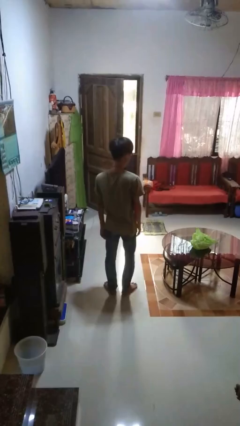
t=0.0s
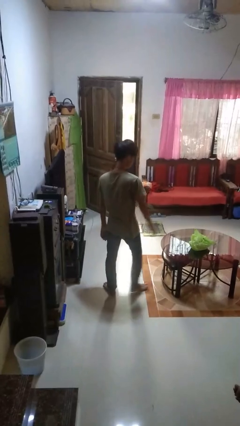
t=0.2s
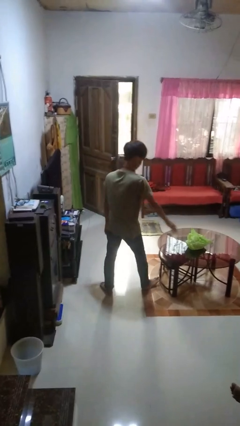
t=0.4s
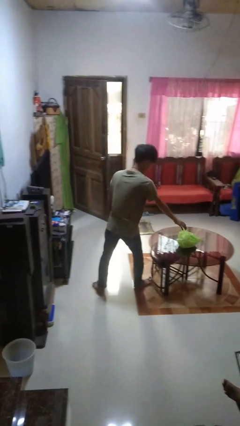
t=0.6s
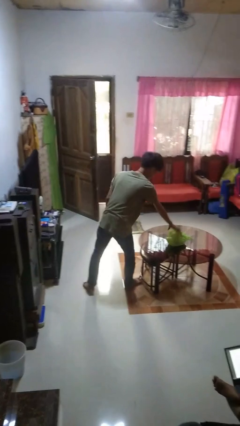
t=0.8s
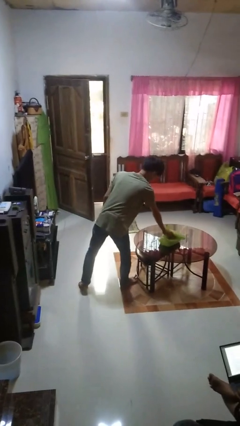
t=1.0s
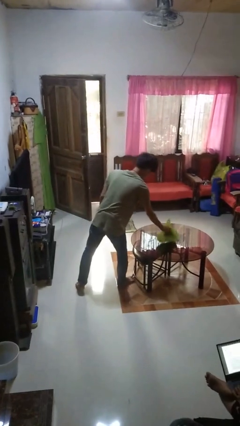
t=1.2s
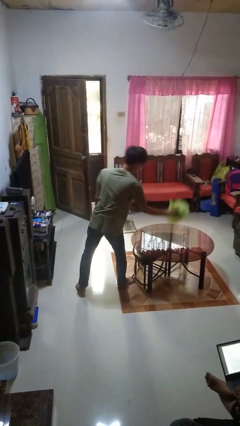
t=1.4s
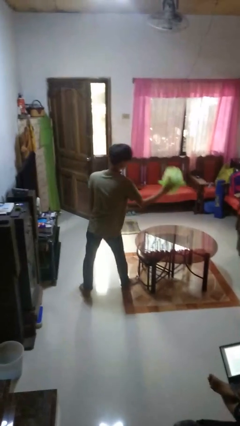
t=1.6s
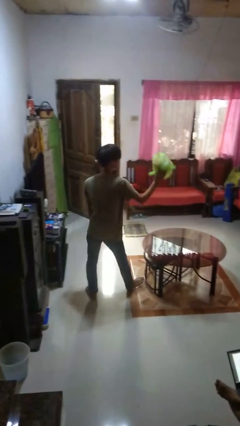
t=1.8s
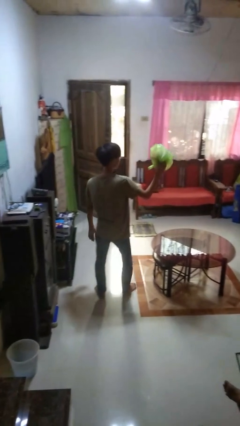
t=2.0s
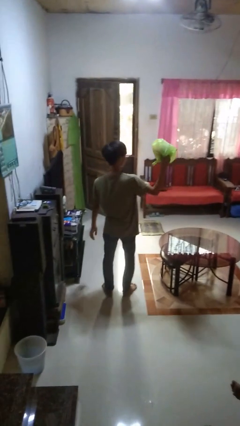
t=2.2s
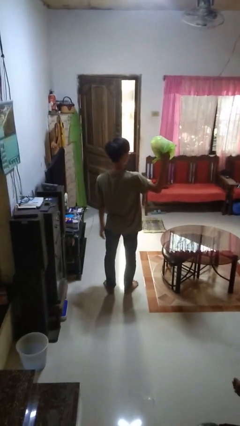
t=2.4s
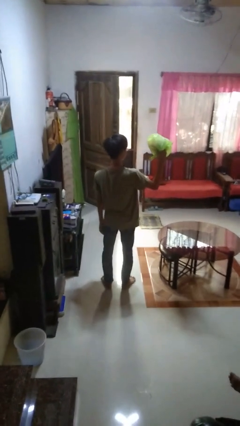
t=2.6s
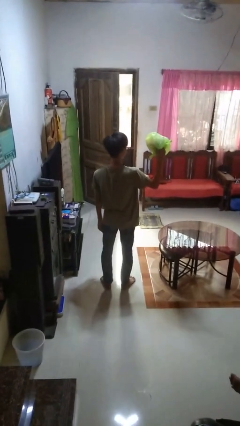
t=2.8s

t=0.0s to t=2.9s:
person picks up object from table

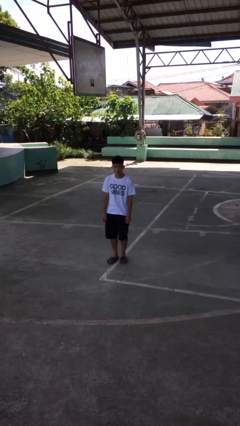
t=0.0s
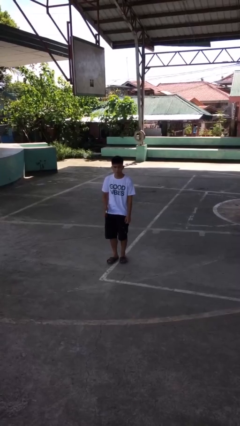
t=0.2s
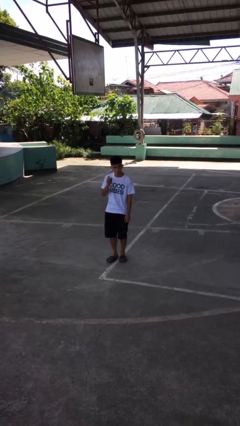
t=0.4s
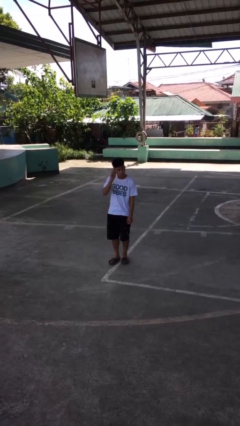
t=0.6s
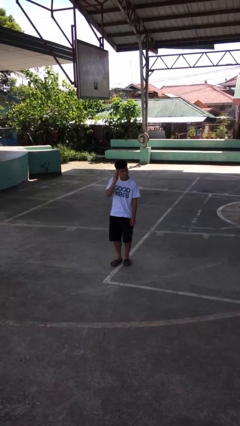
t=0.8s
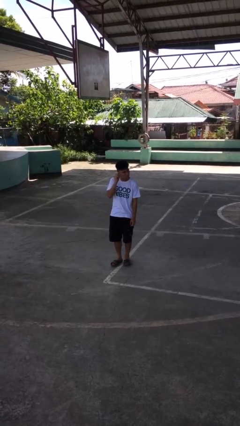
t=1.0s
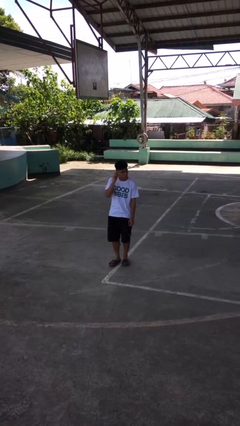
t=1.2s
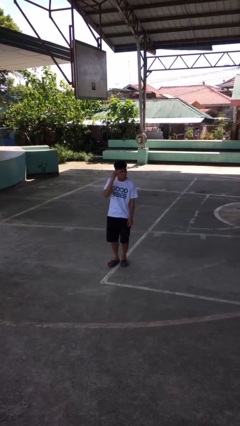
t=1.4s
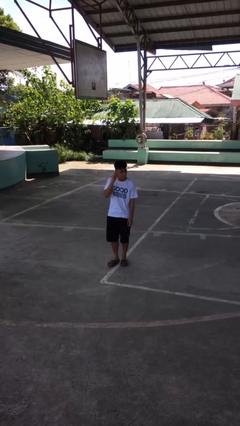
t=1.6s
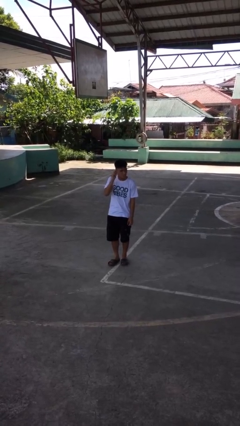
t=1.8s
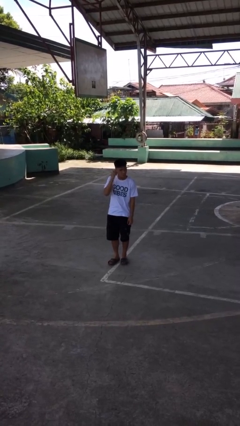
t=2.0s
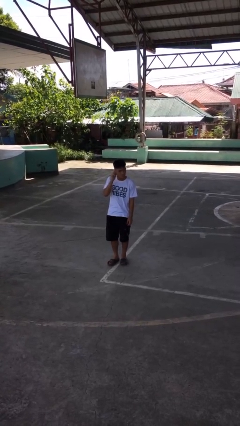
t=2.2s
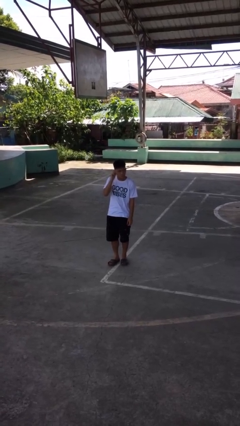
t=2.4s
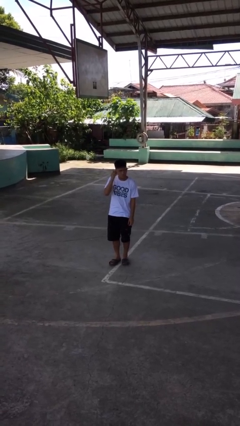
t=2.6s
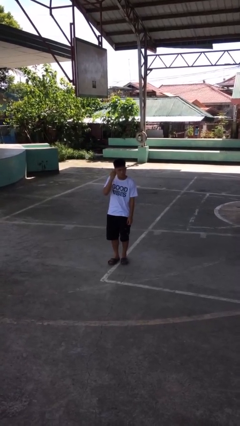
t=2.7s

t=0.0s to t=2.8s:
person touches earlobe

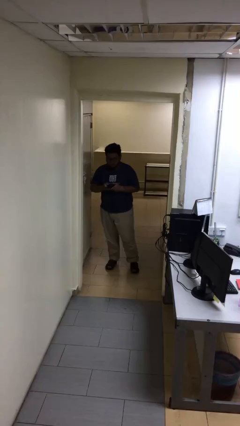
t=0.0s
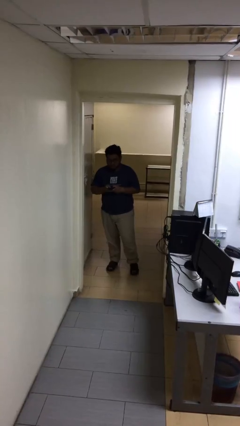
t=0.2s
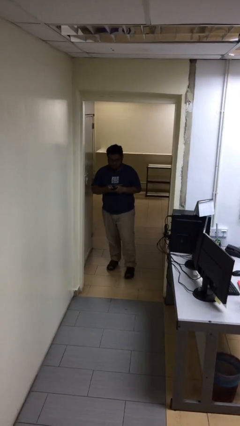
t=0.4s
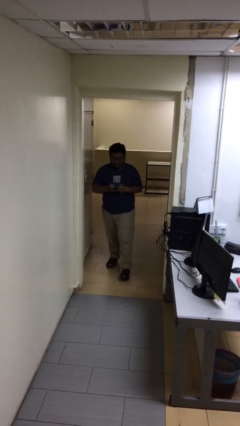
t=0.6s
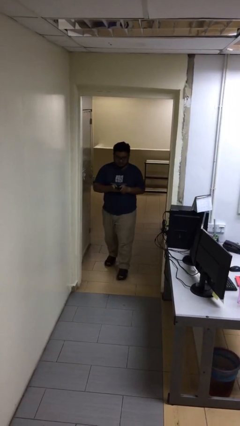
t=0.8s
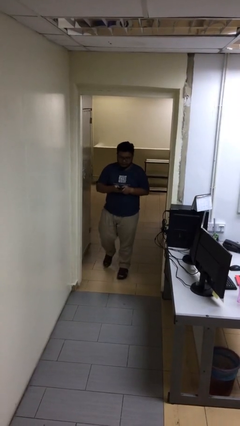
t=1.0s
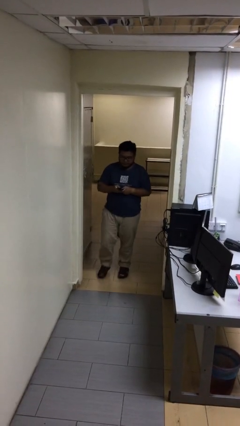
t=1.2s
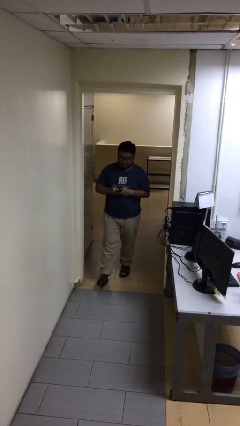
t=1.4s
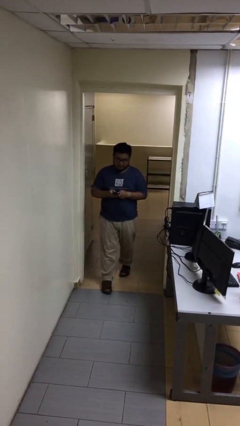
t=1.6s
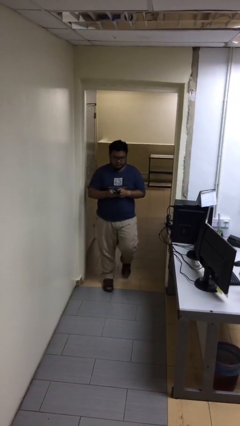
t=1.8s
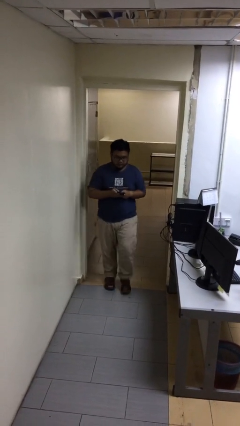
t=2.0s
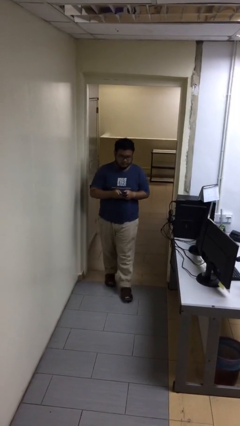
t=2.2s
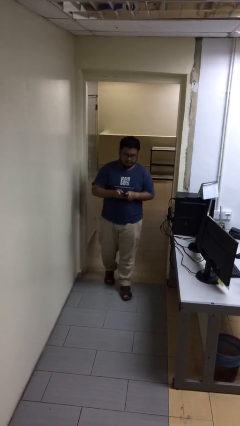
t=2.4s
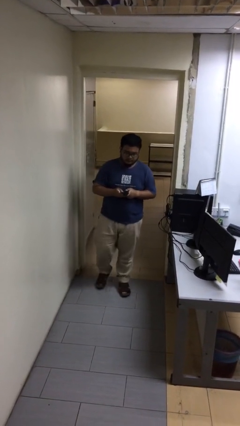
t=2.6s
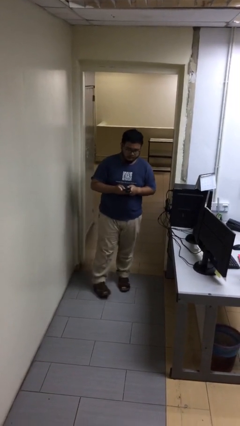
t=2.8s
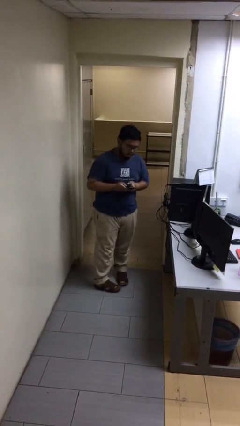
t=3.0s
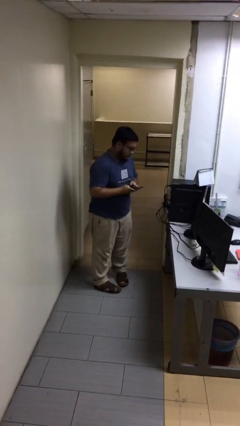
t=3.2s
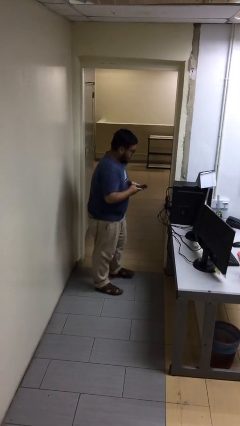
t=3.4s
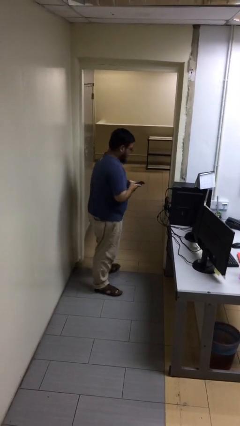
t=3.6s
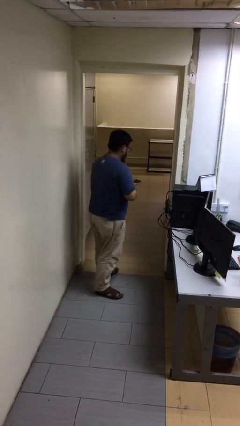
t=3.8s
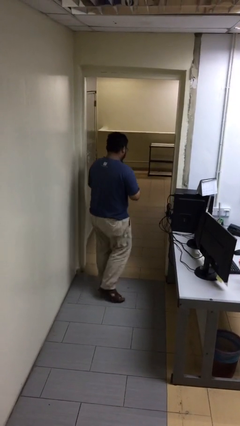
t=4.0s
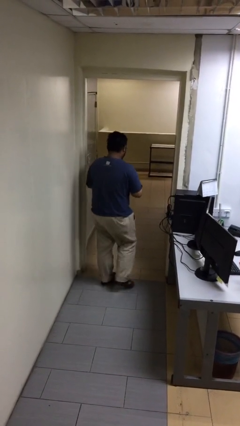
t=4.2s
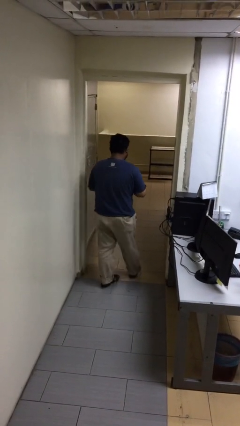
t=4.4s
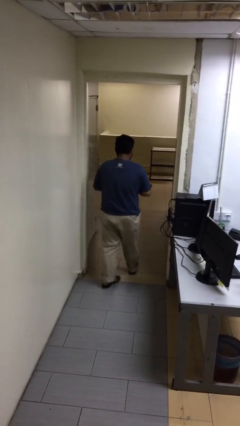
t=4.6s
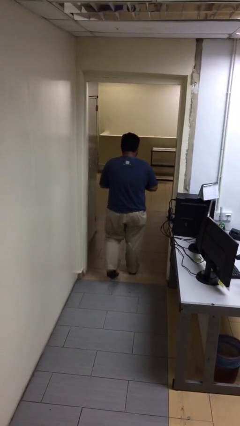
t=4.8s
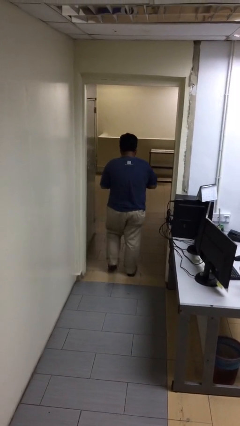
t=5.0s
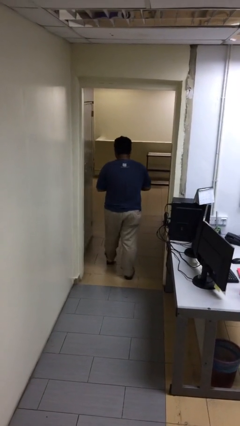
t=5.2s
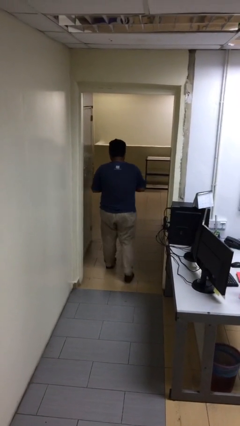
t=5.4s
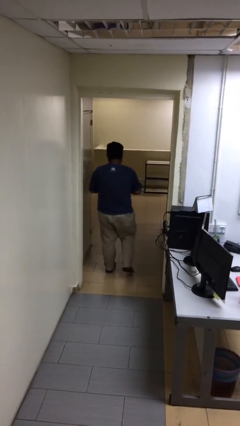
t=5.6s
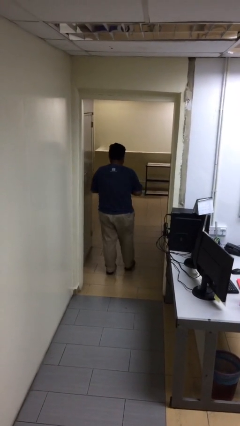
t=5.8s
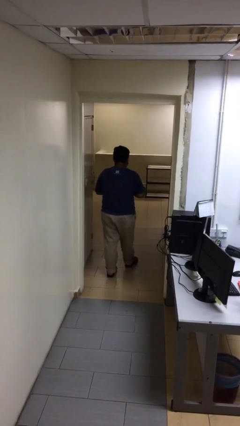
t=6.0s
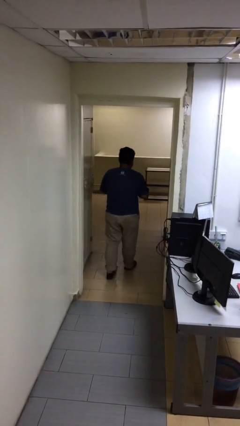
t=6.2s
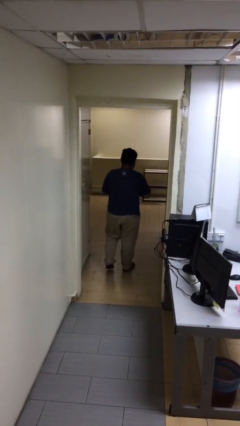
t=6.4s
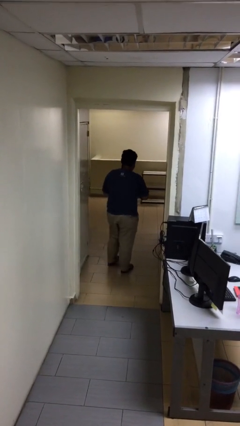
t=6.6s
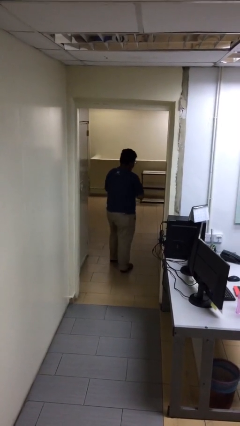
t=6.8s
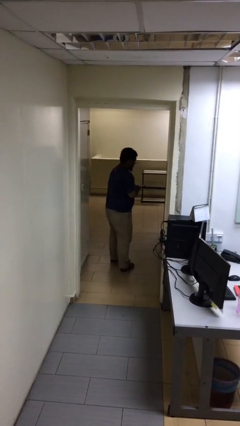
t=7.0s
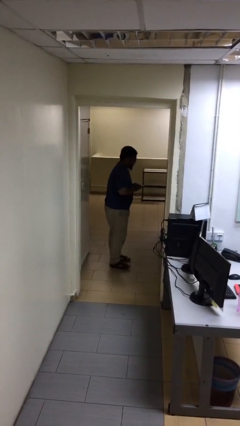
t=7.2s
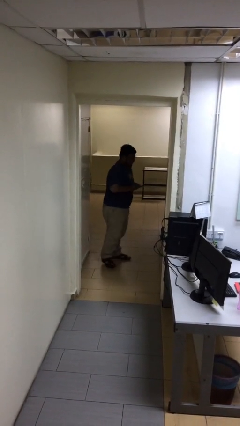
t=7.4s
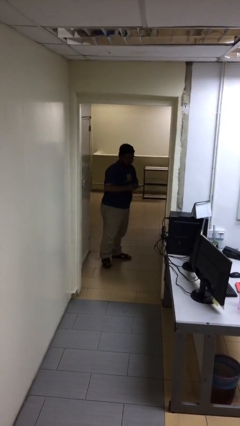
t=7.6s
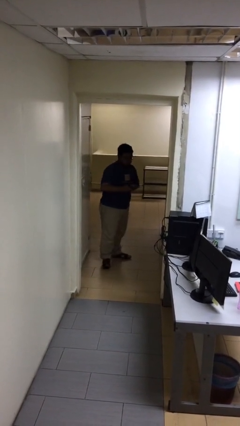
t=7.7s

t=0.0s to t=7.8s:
person texts on phone

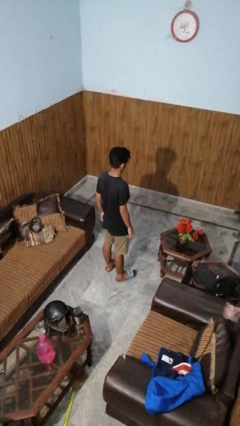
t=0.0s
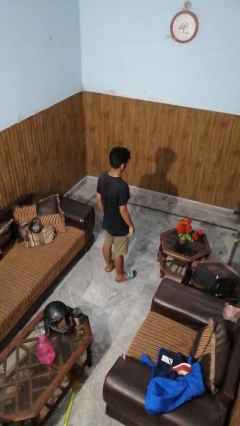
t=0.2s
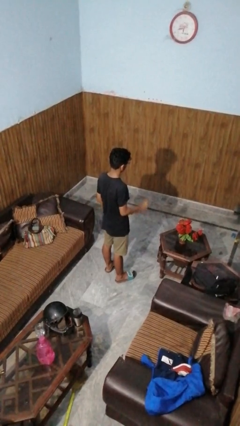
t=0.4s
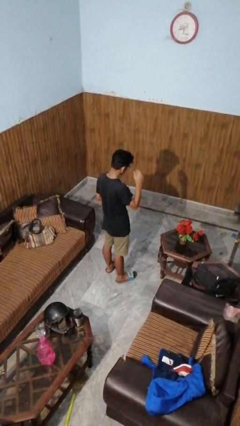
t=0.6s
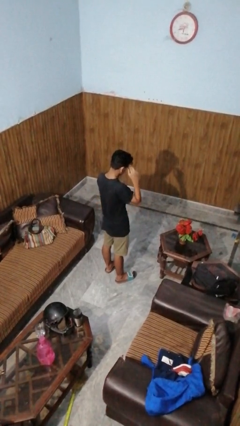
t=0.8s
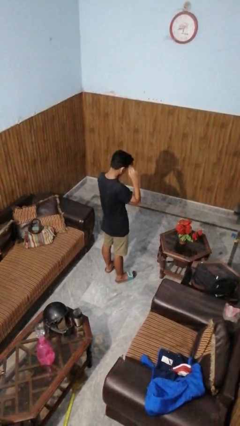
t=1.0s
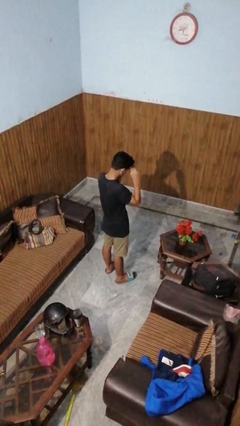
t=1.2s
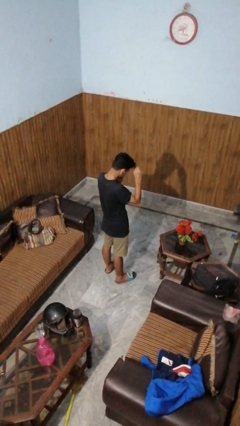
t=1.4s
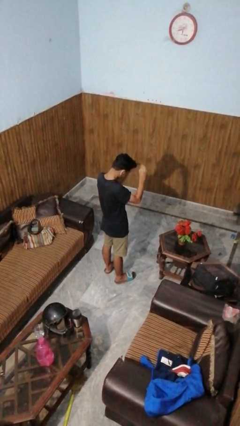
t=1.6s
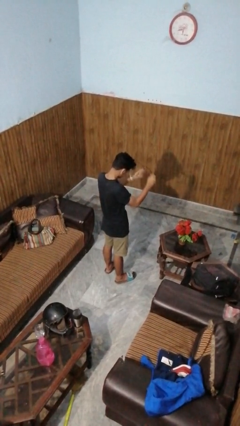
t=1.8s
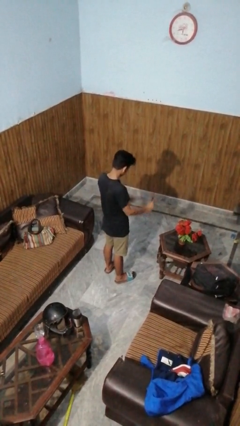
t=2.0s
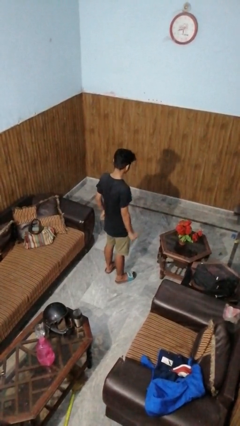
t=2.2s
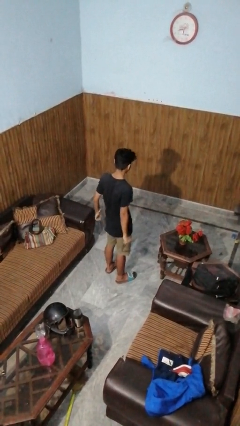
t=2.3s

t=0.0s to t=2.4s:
person takes off glasses

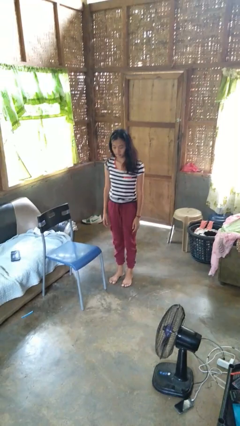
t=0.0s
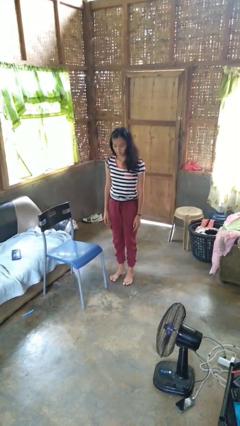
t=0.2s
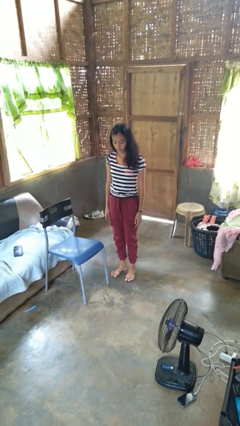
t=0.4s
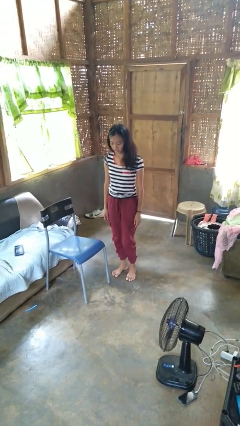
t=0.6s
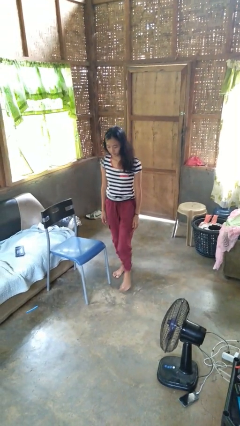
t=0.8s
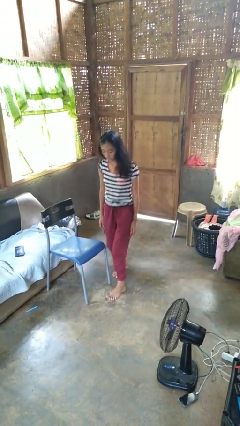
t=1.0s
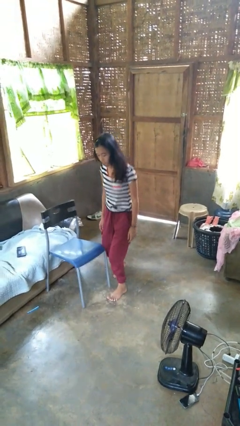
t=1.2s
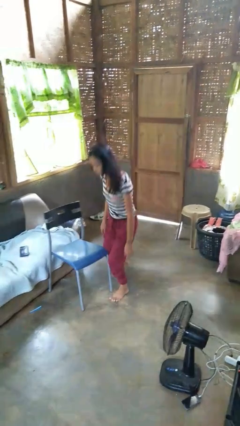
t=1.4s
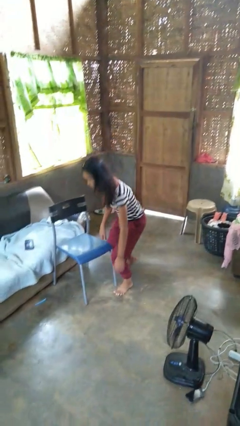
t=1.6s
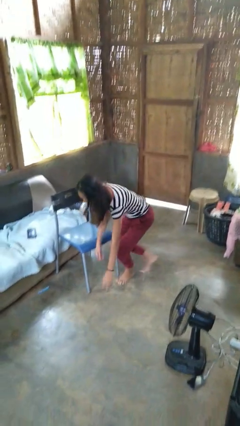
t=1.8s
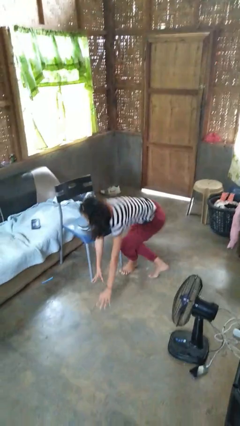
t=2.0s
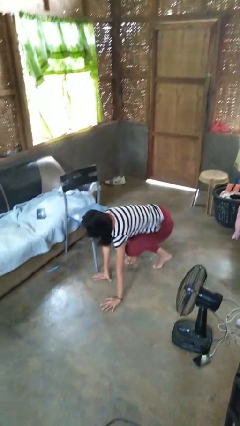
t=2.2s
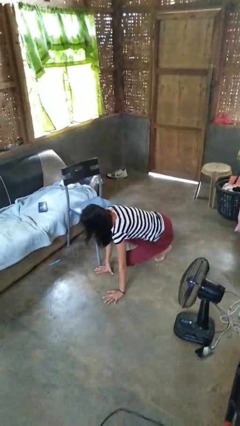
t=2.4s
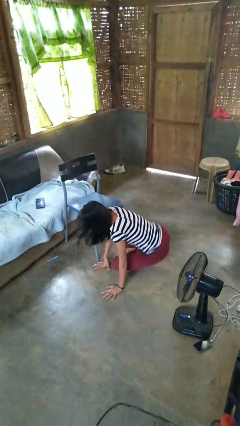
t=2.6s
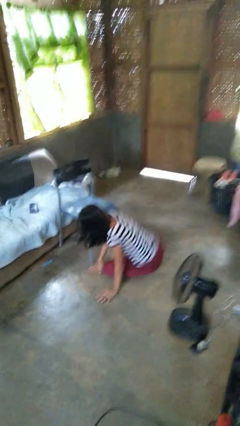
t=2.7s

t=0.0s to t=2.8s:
person trips on object on floor
